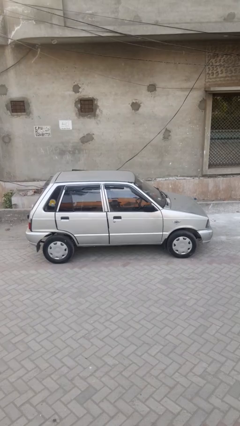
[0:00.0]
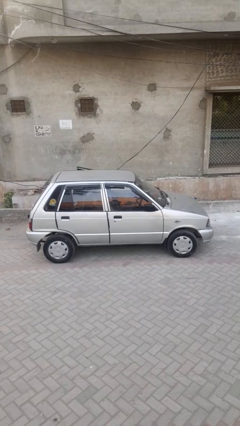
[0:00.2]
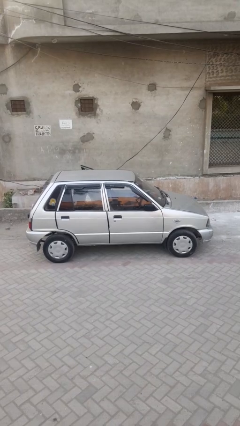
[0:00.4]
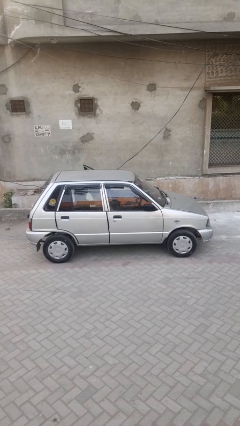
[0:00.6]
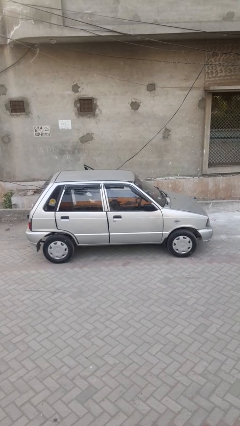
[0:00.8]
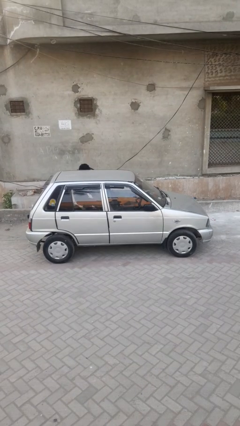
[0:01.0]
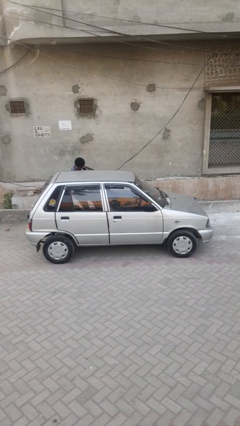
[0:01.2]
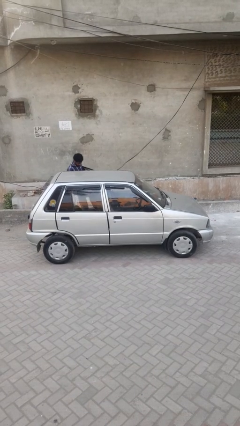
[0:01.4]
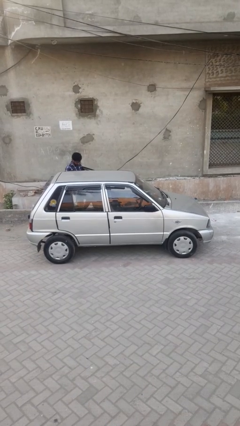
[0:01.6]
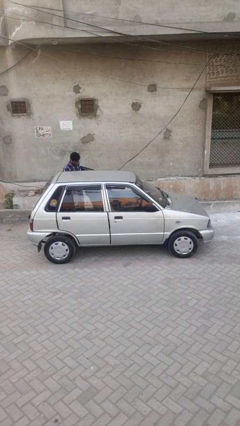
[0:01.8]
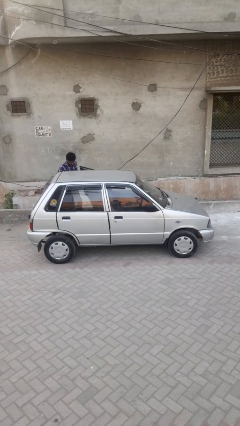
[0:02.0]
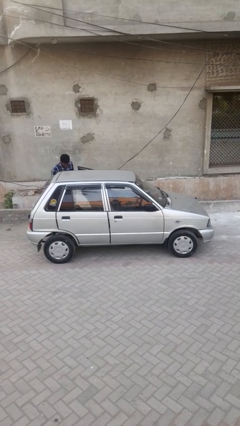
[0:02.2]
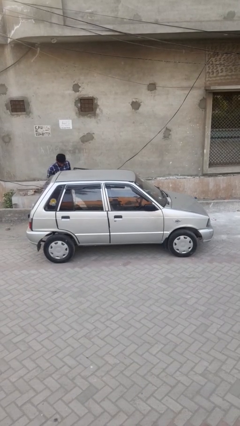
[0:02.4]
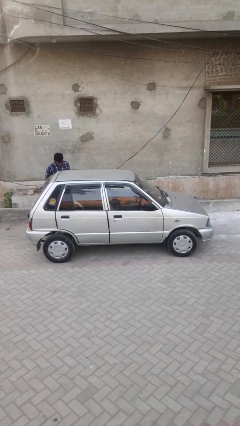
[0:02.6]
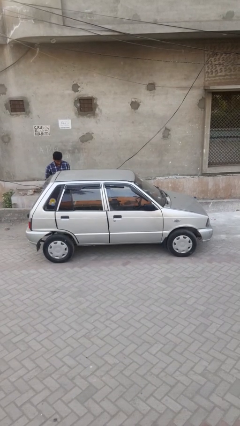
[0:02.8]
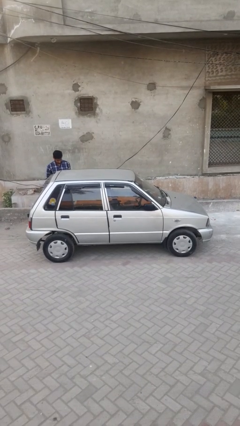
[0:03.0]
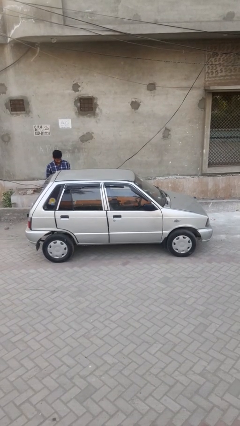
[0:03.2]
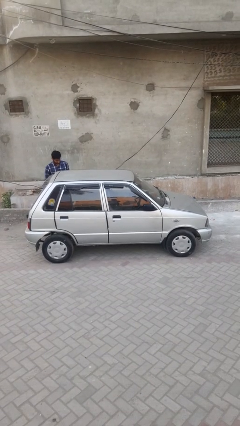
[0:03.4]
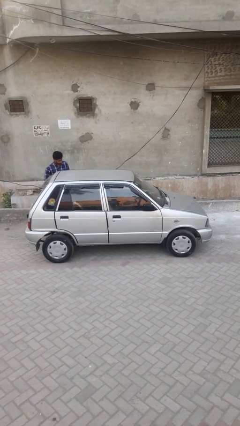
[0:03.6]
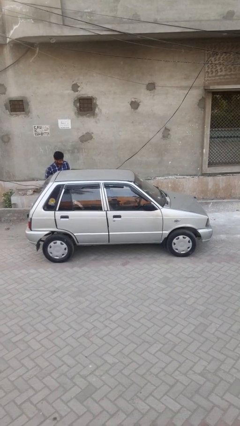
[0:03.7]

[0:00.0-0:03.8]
car drops off person

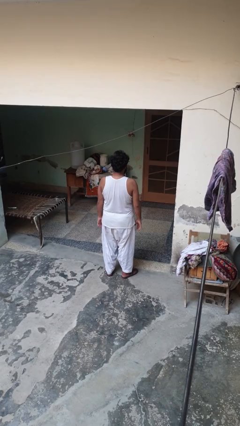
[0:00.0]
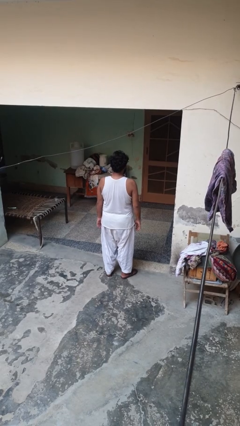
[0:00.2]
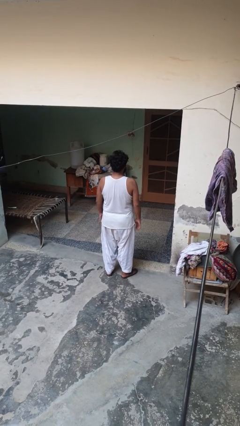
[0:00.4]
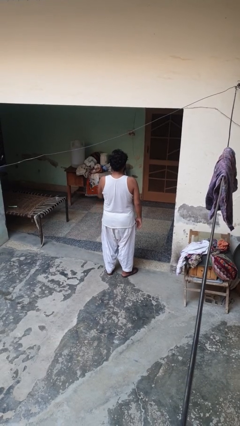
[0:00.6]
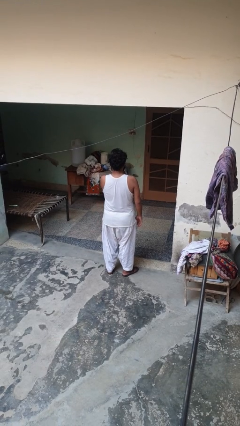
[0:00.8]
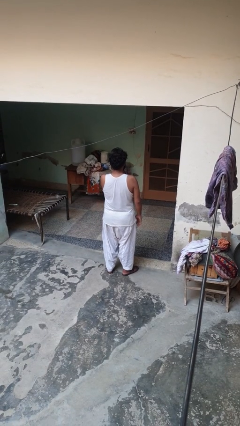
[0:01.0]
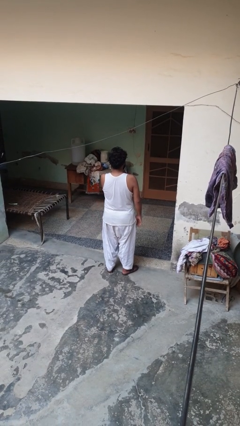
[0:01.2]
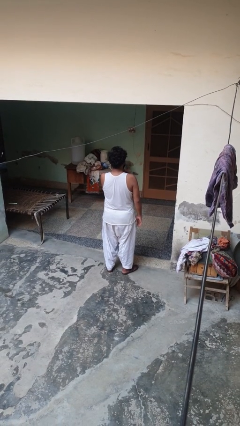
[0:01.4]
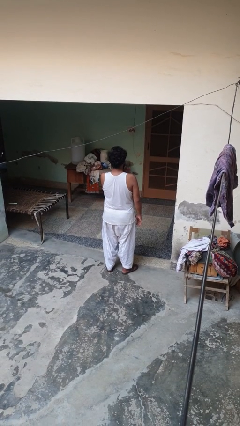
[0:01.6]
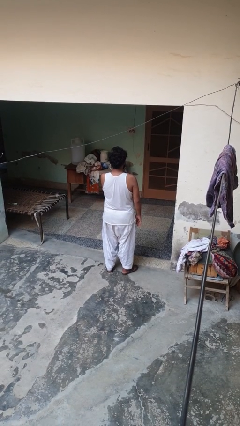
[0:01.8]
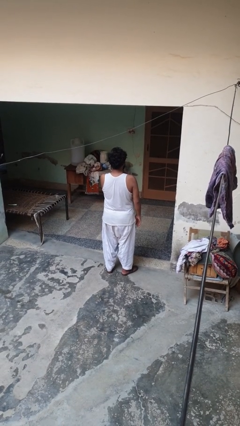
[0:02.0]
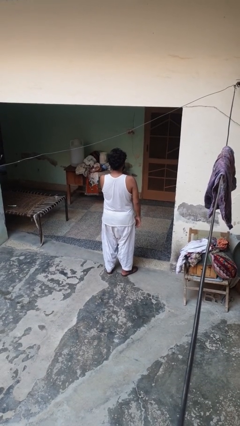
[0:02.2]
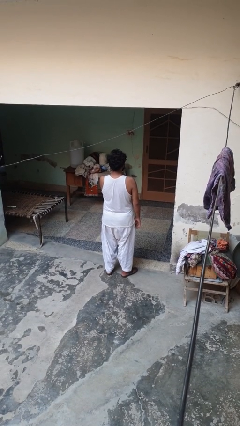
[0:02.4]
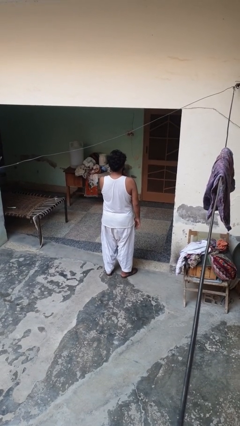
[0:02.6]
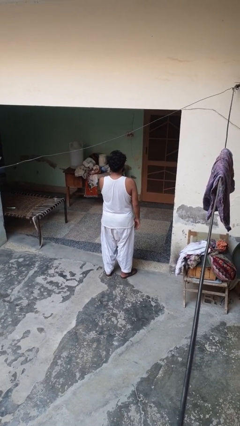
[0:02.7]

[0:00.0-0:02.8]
person drums on chest

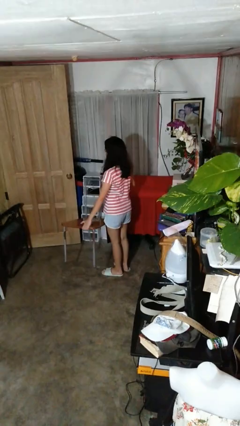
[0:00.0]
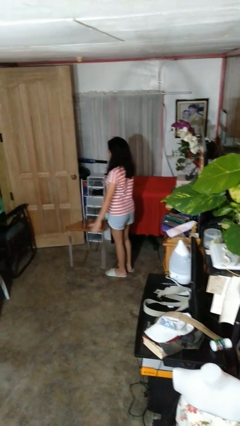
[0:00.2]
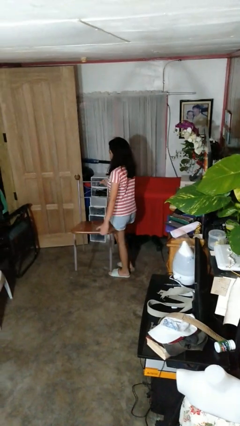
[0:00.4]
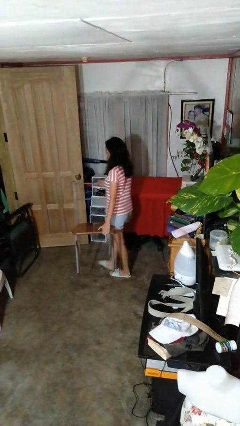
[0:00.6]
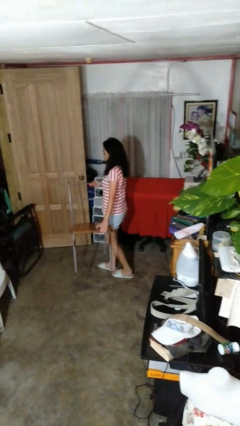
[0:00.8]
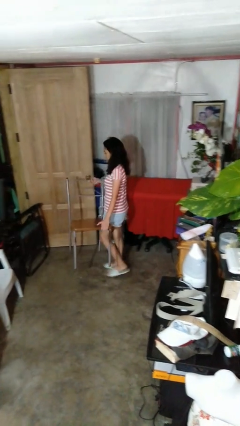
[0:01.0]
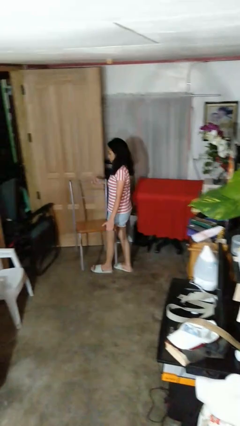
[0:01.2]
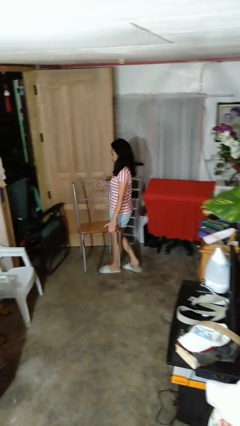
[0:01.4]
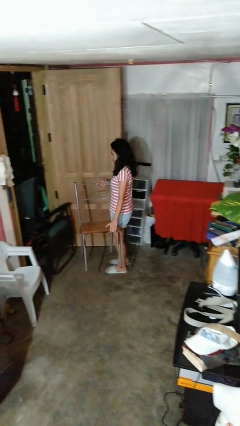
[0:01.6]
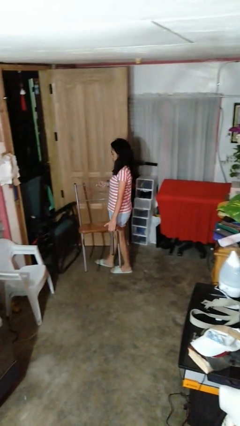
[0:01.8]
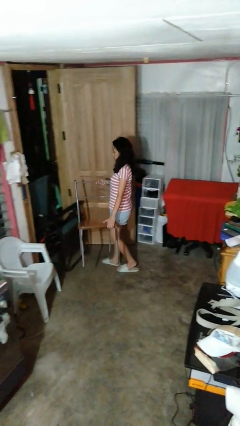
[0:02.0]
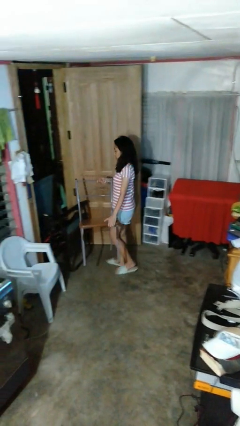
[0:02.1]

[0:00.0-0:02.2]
person carries furniture

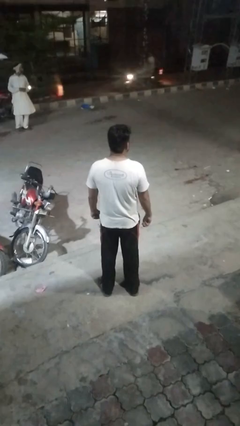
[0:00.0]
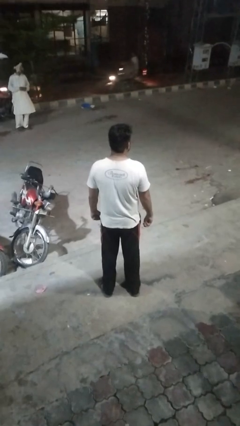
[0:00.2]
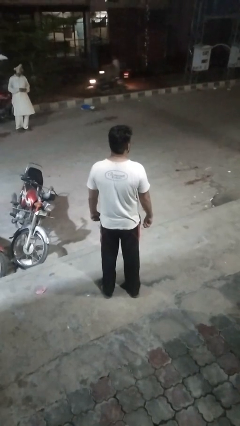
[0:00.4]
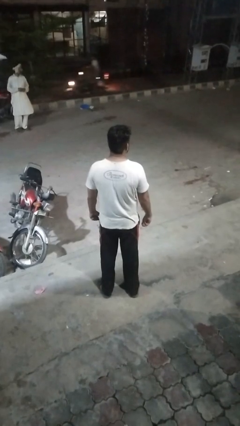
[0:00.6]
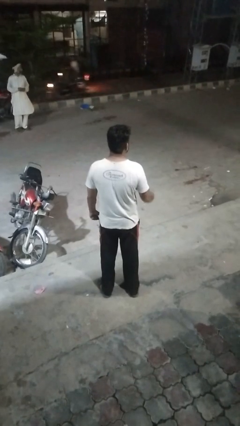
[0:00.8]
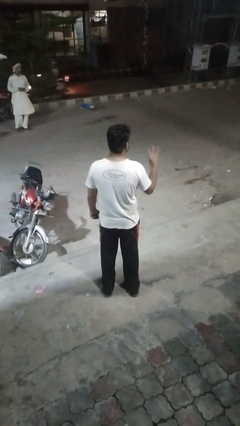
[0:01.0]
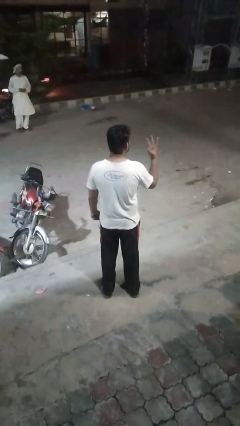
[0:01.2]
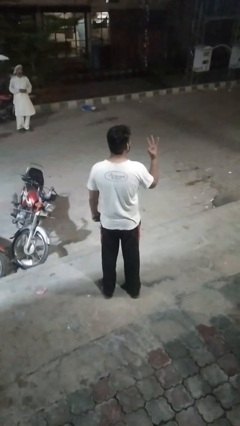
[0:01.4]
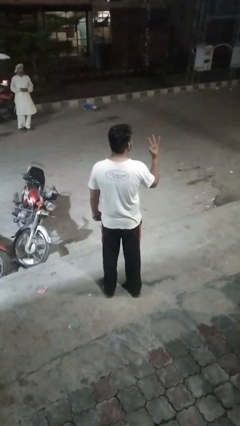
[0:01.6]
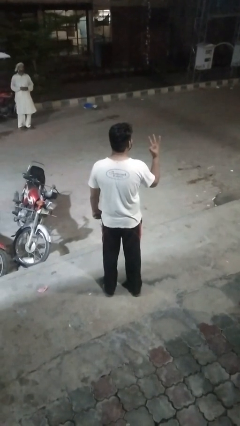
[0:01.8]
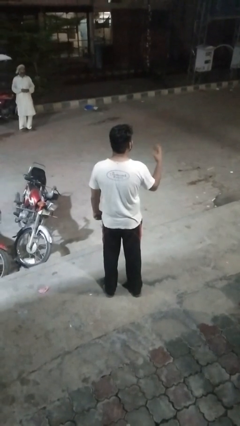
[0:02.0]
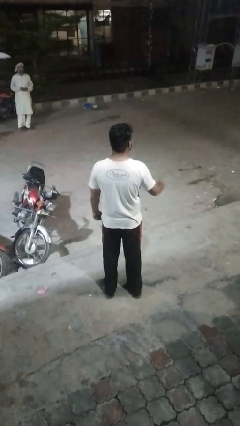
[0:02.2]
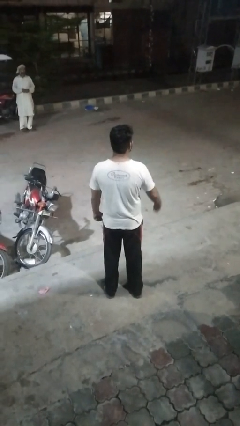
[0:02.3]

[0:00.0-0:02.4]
person gestures number three

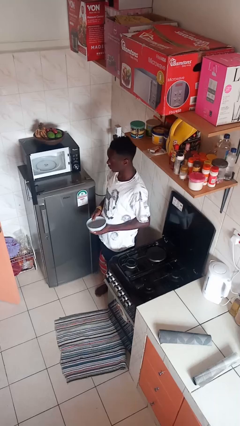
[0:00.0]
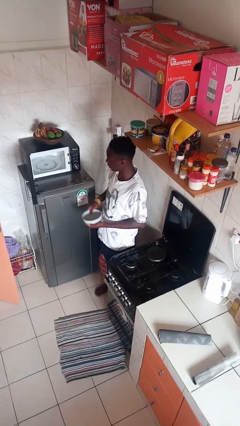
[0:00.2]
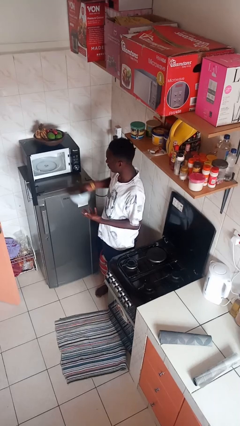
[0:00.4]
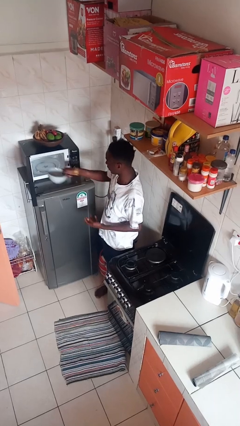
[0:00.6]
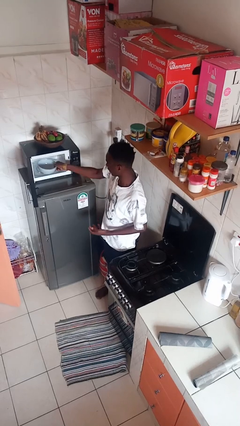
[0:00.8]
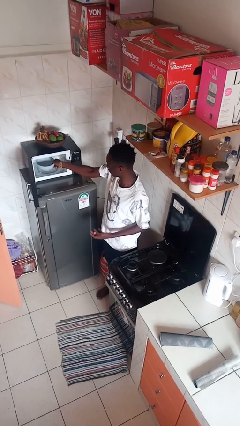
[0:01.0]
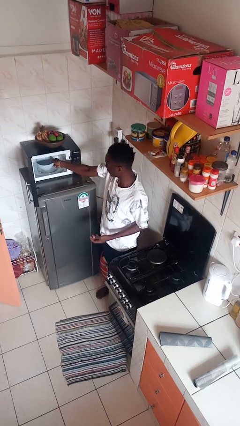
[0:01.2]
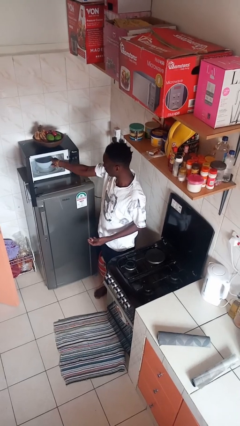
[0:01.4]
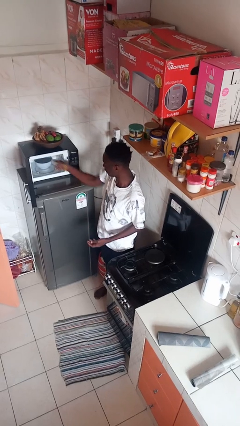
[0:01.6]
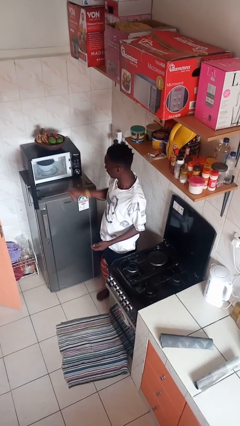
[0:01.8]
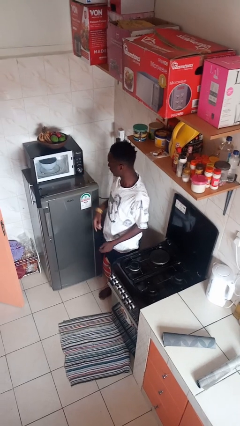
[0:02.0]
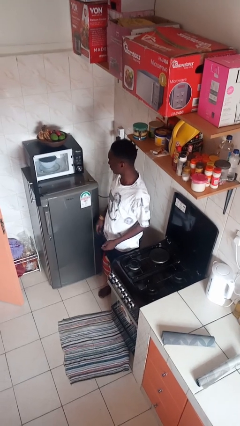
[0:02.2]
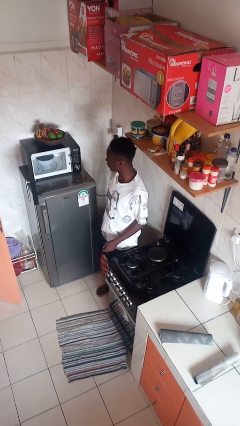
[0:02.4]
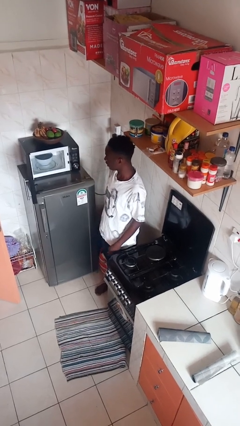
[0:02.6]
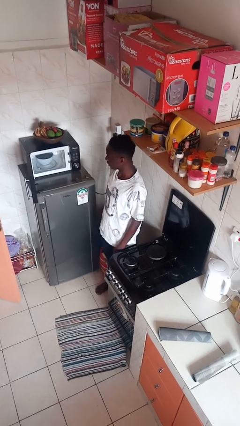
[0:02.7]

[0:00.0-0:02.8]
person puts object into microwave

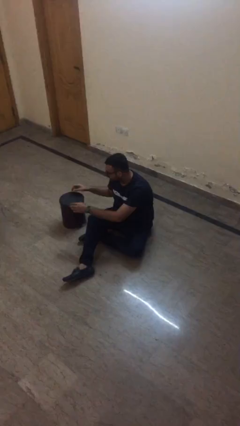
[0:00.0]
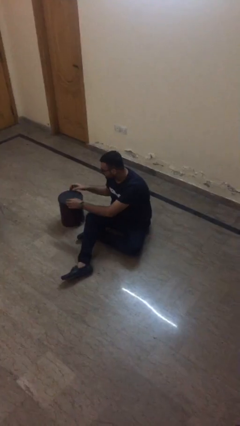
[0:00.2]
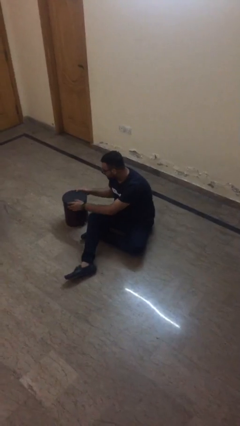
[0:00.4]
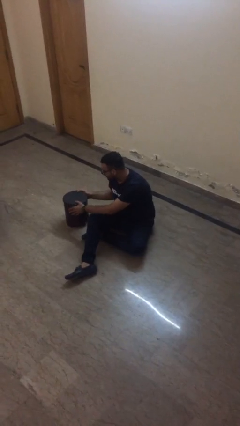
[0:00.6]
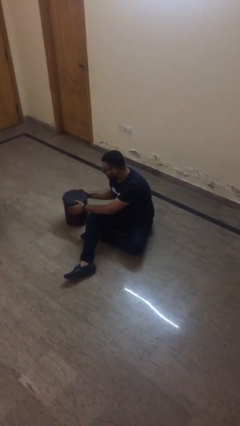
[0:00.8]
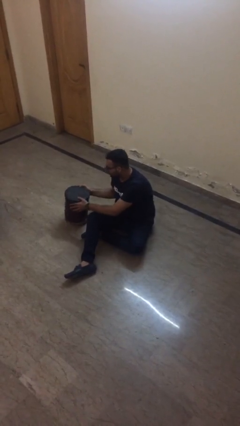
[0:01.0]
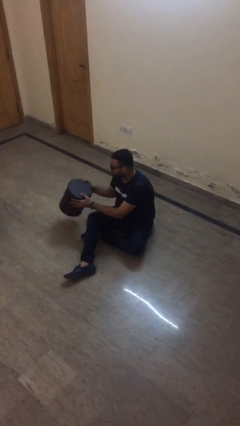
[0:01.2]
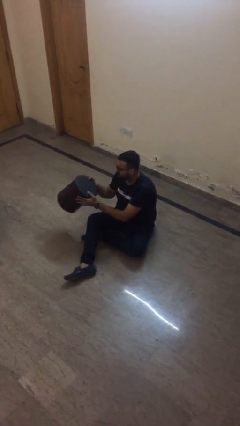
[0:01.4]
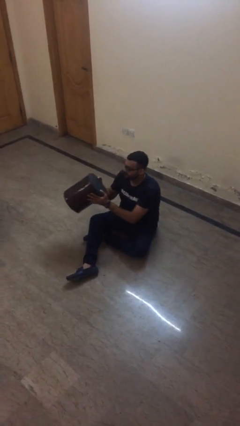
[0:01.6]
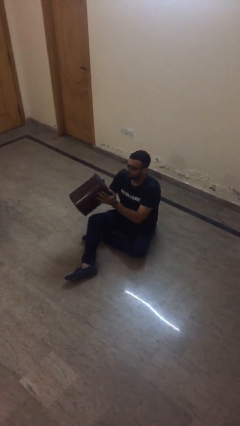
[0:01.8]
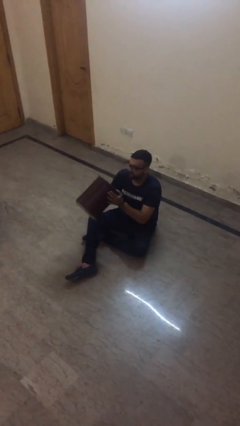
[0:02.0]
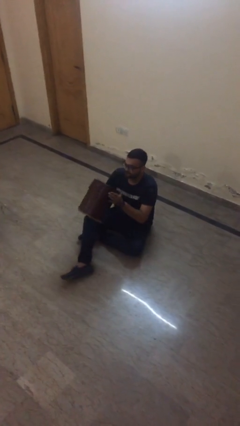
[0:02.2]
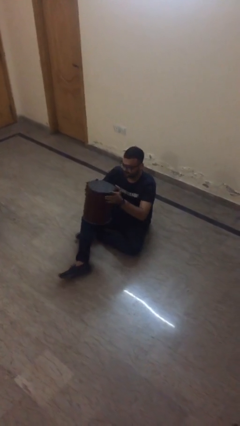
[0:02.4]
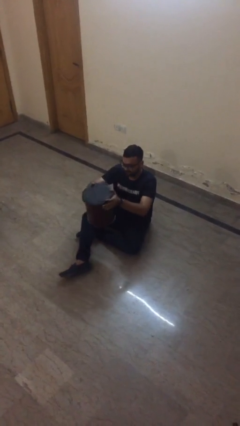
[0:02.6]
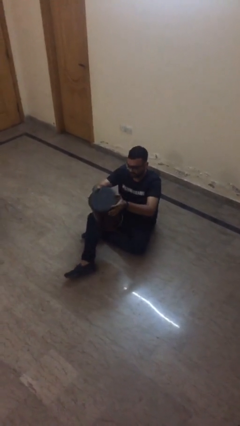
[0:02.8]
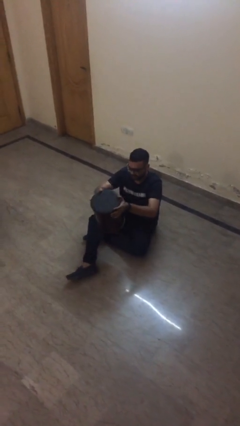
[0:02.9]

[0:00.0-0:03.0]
person picks up object from floor
